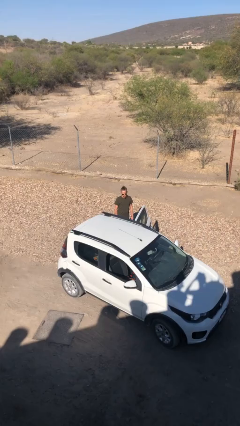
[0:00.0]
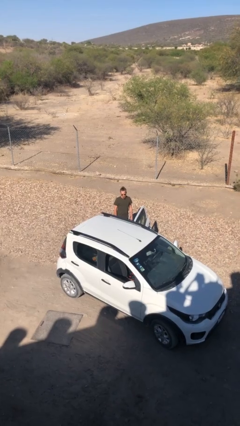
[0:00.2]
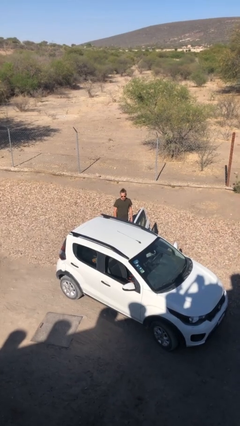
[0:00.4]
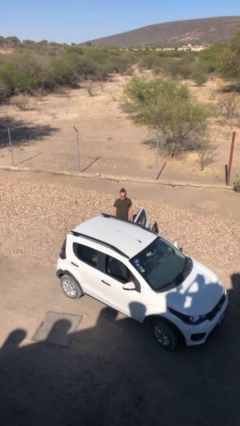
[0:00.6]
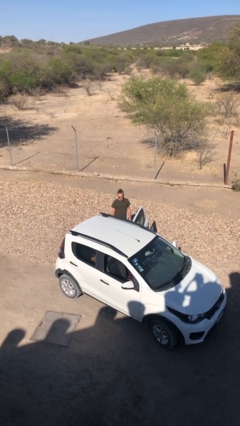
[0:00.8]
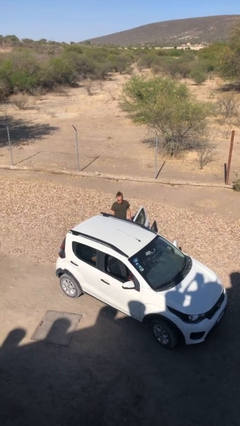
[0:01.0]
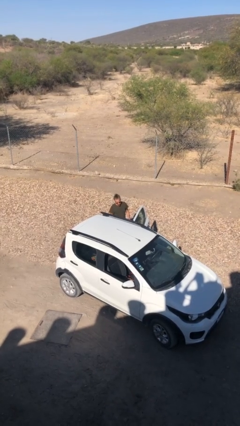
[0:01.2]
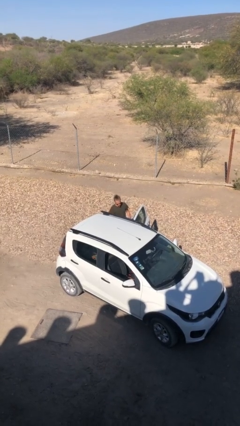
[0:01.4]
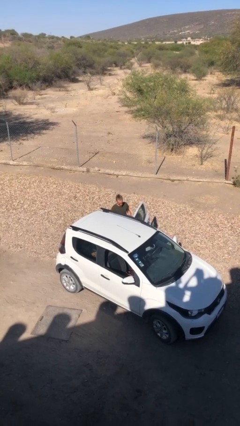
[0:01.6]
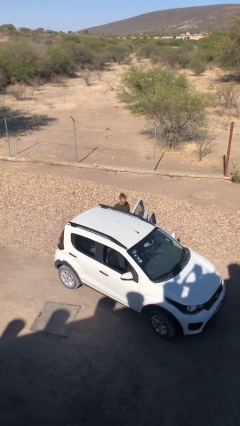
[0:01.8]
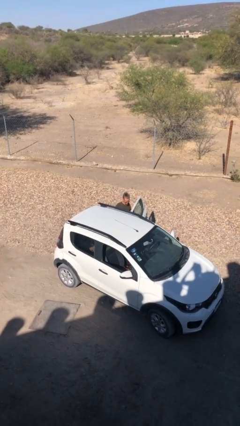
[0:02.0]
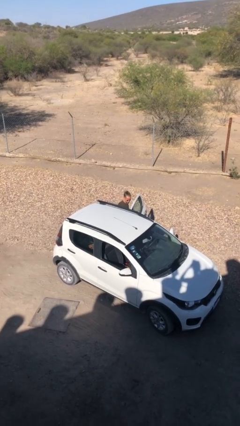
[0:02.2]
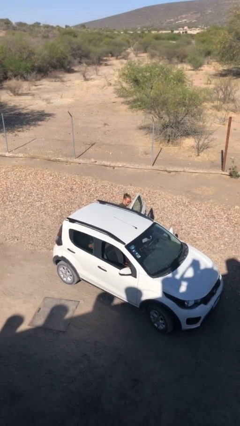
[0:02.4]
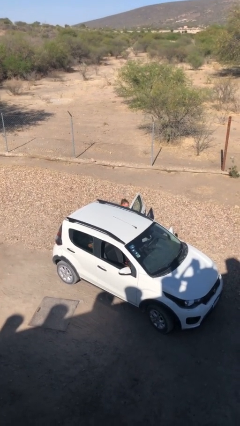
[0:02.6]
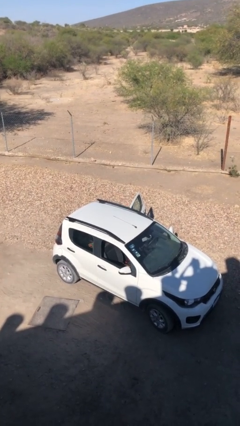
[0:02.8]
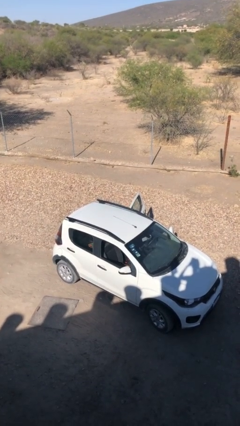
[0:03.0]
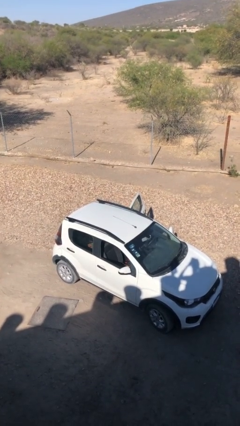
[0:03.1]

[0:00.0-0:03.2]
person enters car

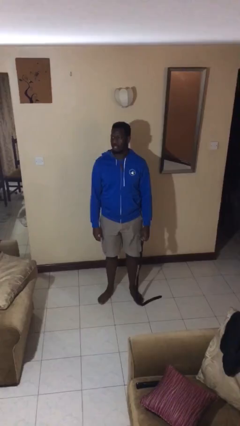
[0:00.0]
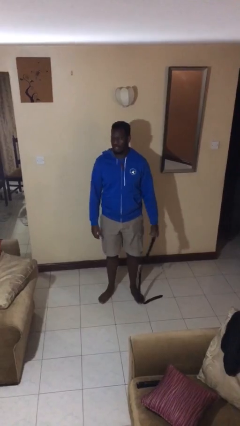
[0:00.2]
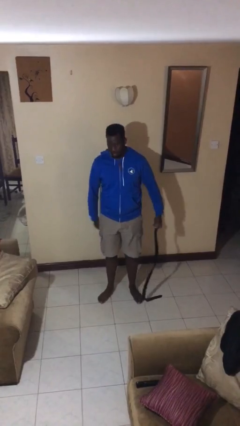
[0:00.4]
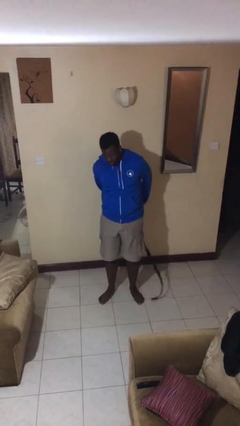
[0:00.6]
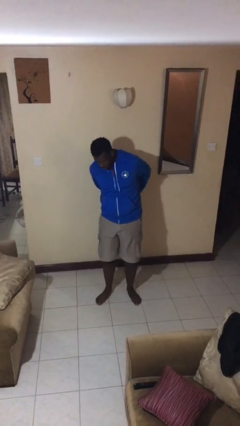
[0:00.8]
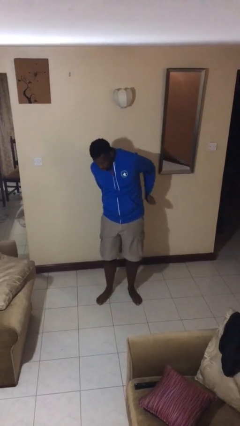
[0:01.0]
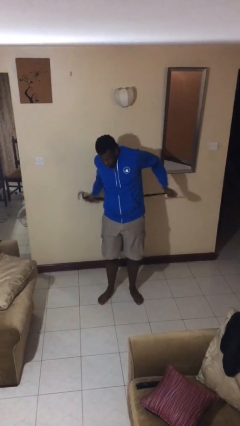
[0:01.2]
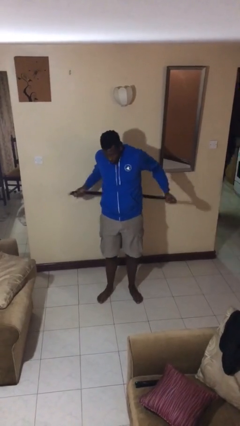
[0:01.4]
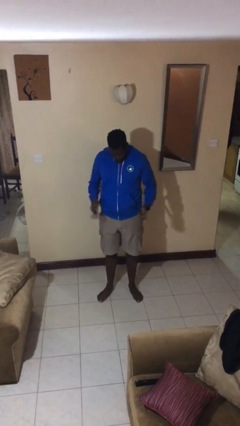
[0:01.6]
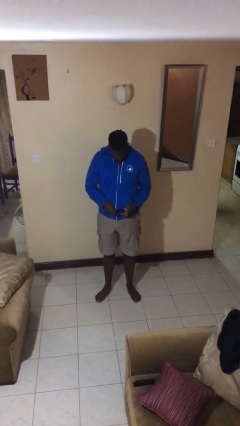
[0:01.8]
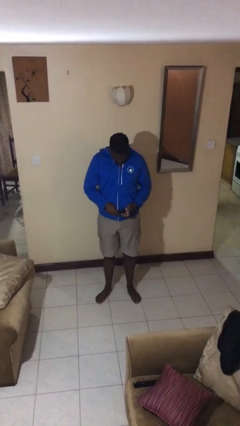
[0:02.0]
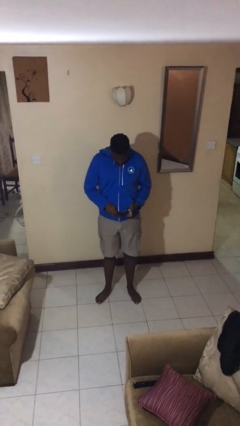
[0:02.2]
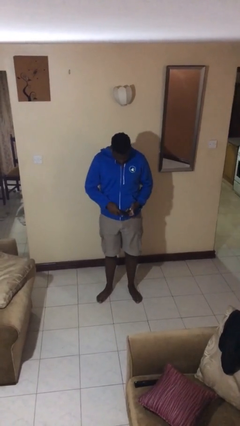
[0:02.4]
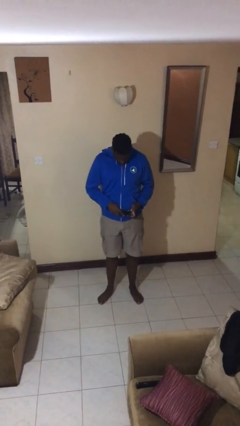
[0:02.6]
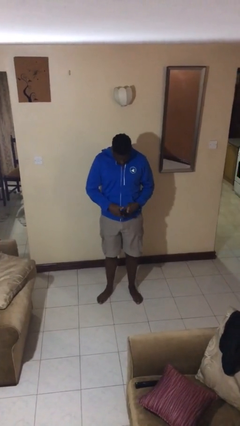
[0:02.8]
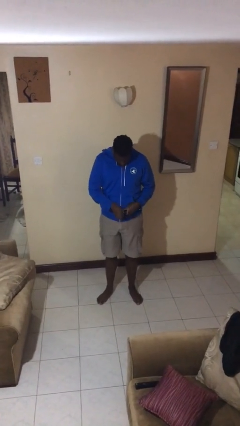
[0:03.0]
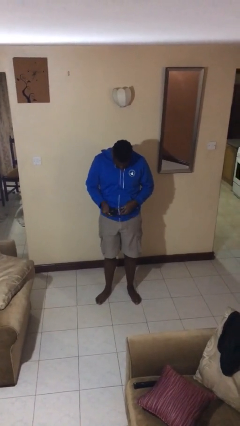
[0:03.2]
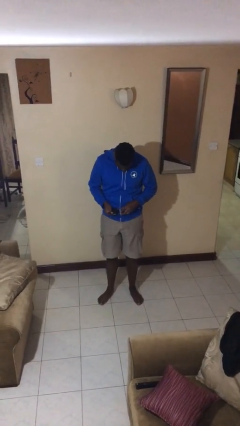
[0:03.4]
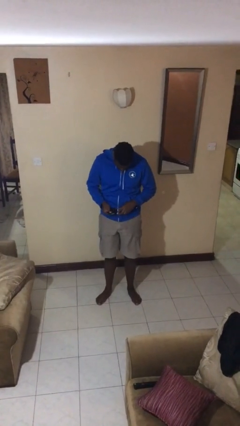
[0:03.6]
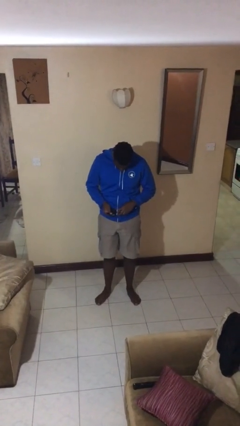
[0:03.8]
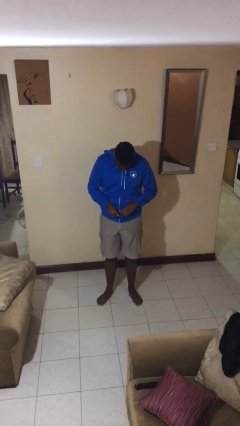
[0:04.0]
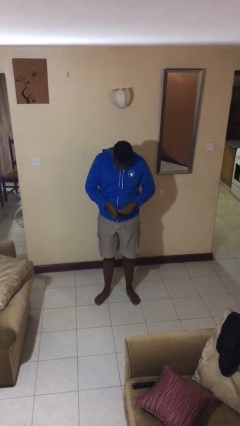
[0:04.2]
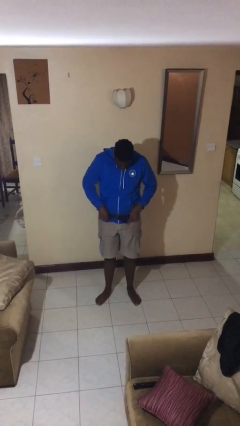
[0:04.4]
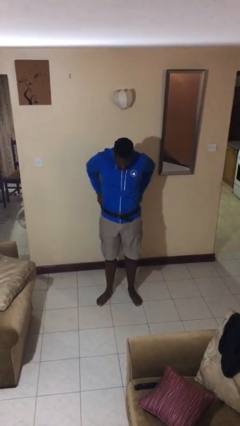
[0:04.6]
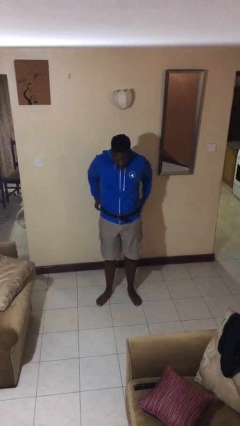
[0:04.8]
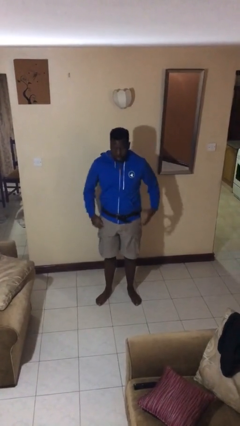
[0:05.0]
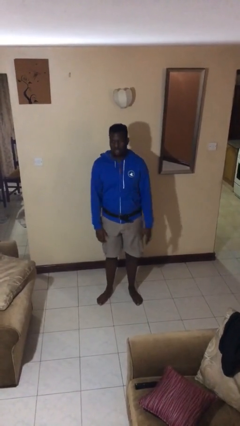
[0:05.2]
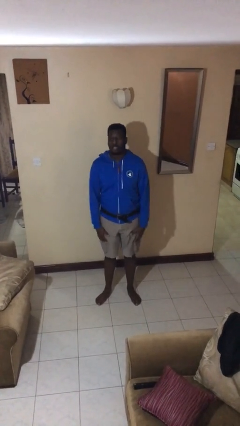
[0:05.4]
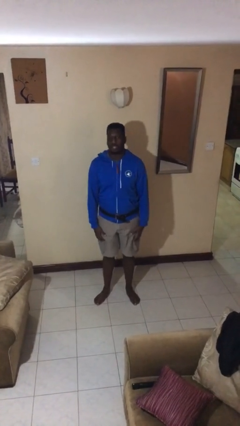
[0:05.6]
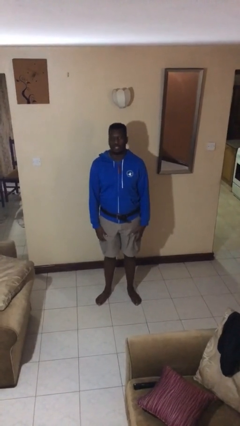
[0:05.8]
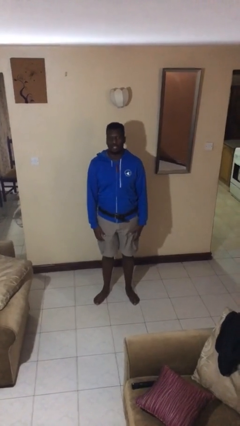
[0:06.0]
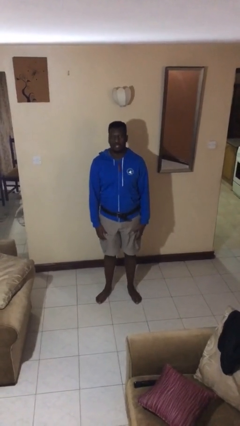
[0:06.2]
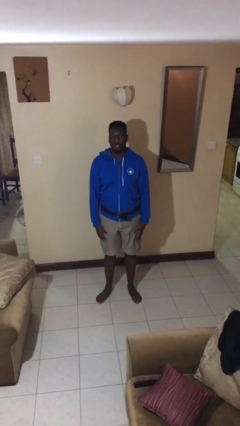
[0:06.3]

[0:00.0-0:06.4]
person puts on belt

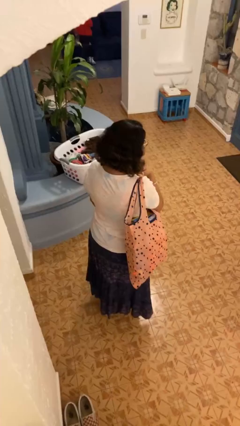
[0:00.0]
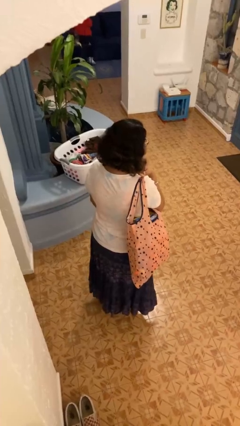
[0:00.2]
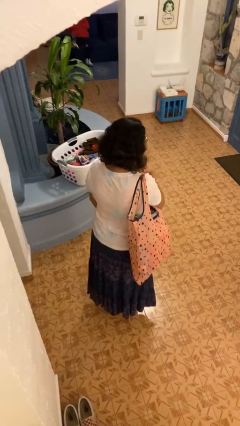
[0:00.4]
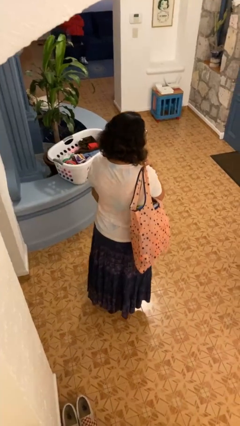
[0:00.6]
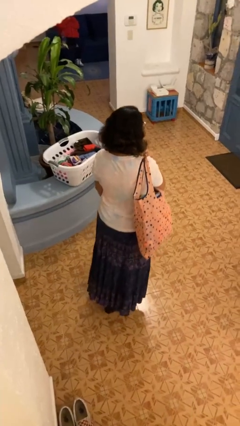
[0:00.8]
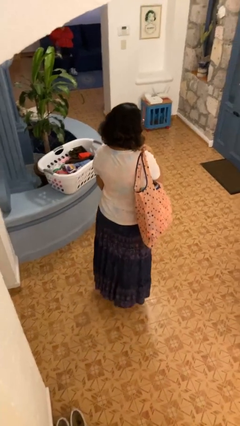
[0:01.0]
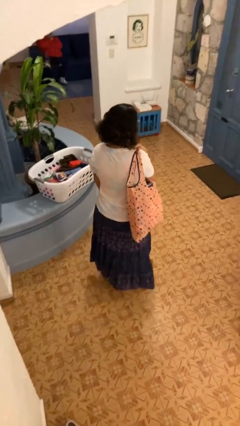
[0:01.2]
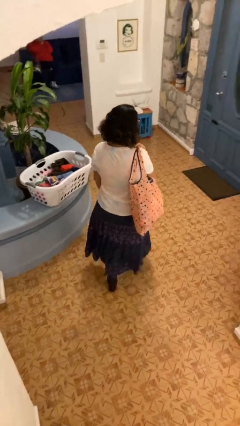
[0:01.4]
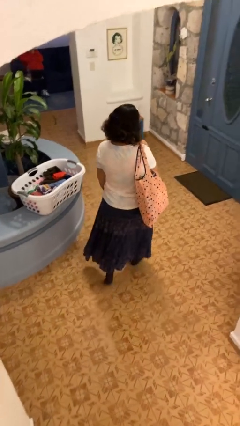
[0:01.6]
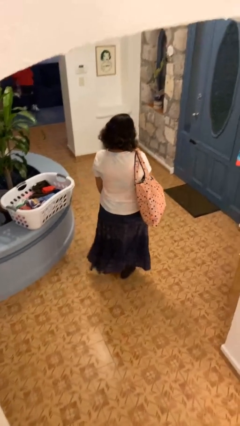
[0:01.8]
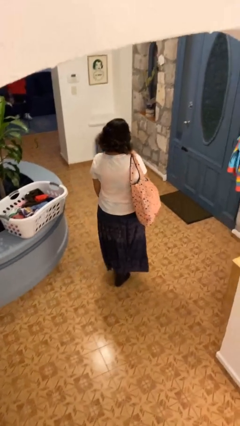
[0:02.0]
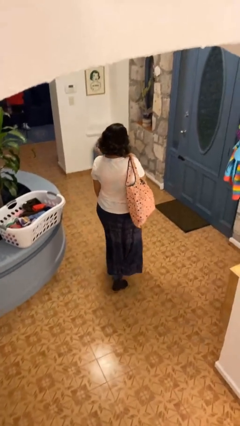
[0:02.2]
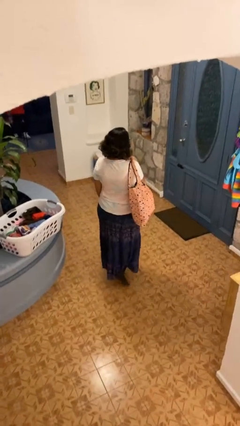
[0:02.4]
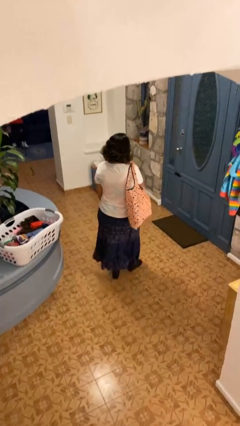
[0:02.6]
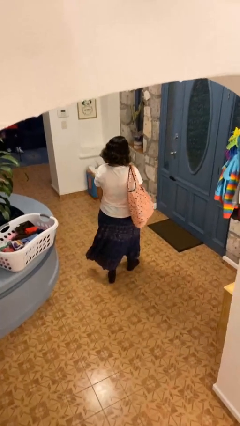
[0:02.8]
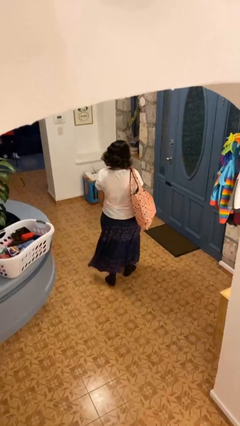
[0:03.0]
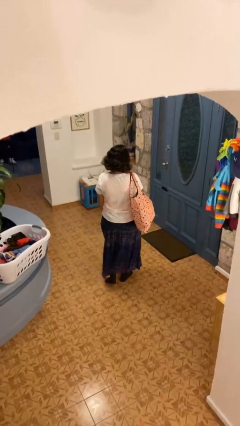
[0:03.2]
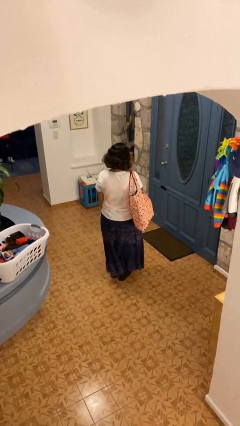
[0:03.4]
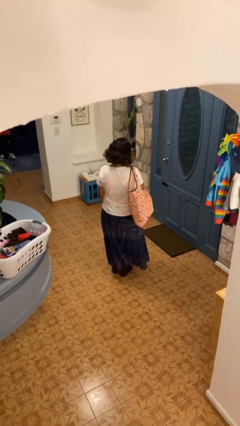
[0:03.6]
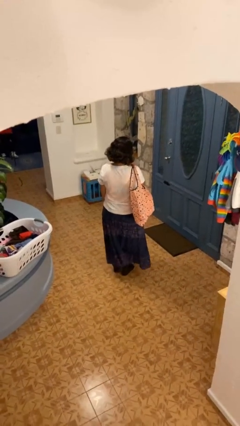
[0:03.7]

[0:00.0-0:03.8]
person carries groceries

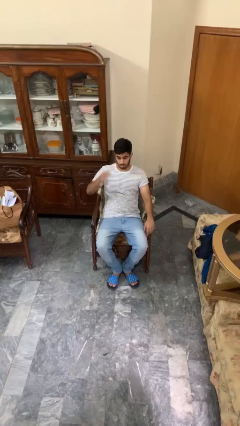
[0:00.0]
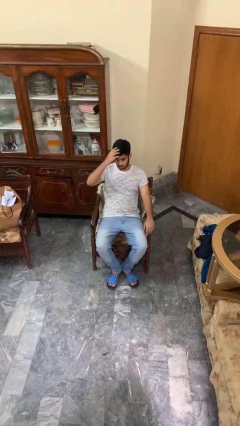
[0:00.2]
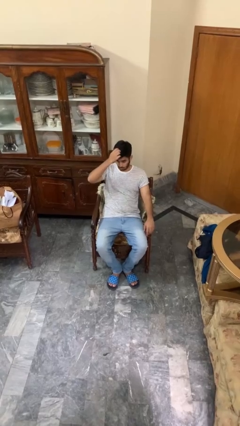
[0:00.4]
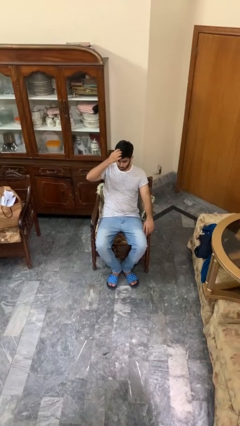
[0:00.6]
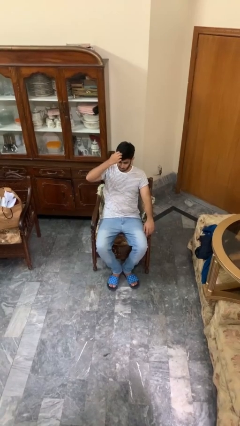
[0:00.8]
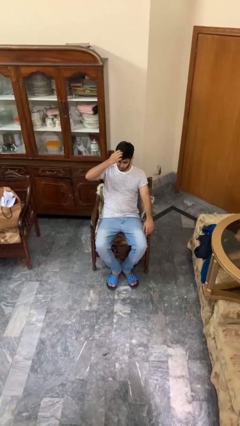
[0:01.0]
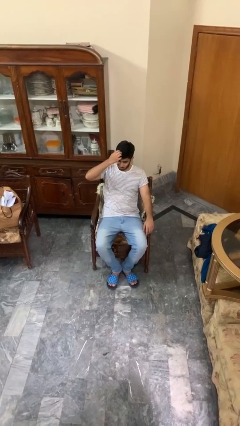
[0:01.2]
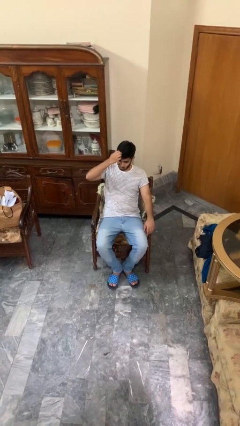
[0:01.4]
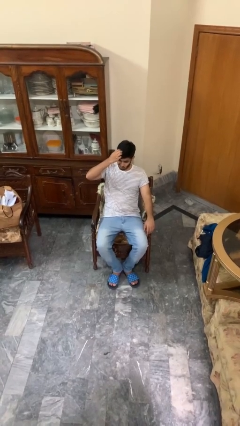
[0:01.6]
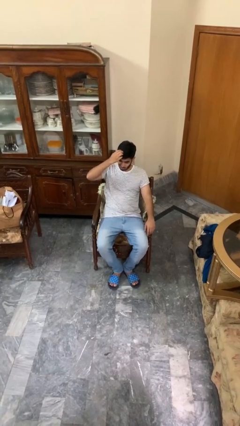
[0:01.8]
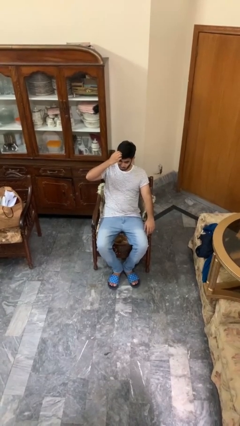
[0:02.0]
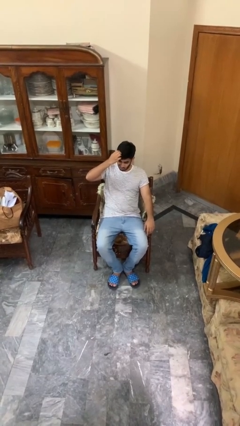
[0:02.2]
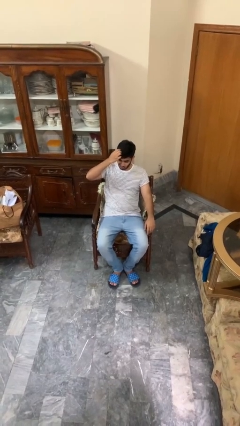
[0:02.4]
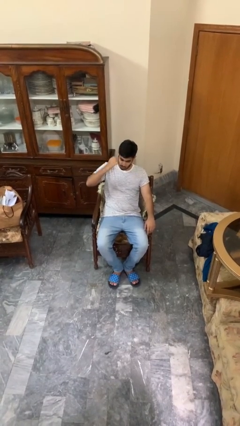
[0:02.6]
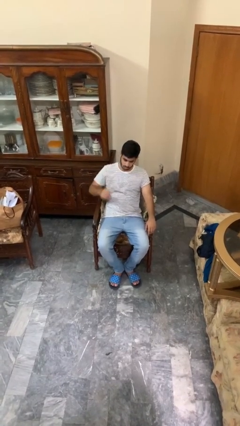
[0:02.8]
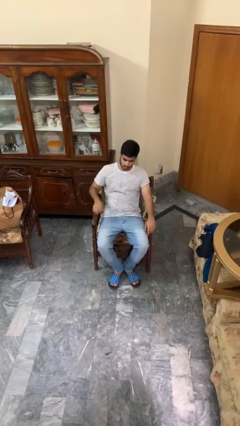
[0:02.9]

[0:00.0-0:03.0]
person strokes hair

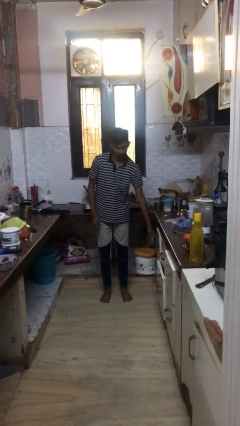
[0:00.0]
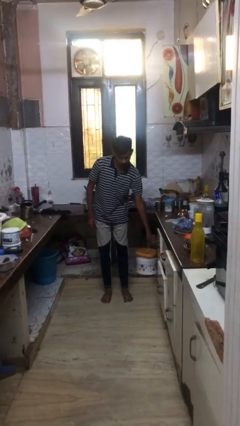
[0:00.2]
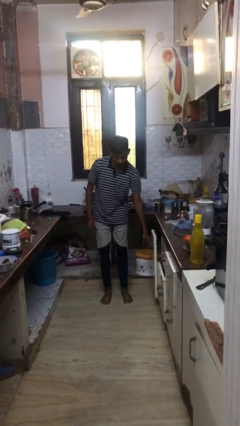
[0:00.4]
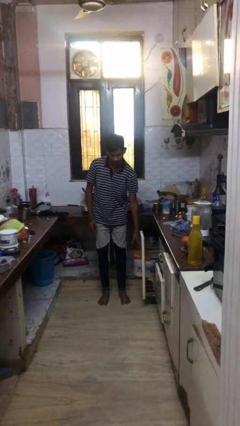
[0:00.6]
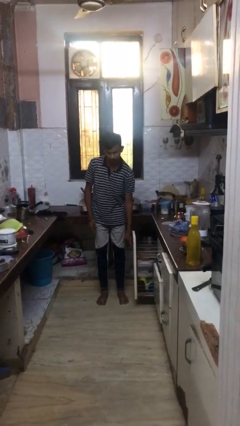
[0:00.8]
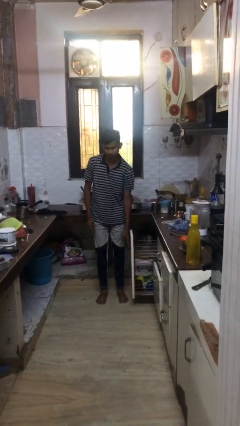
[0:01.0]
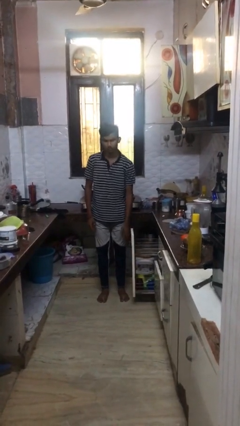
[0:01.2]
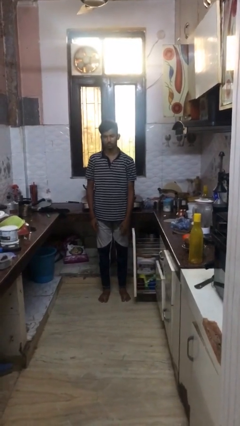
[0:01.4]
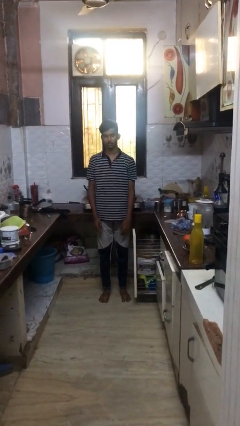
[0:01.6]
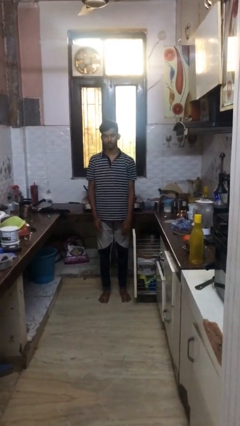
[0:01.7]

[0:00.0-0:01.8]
person opens dishwasher
